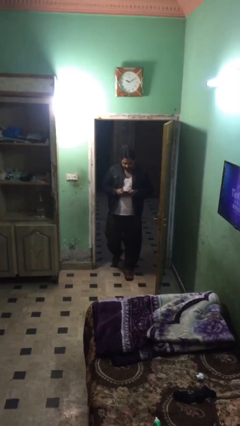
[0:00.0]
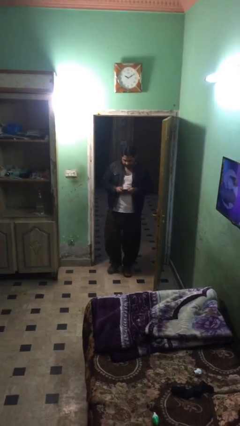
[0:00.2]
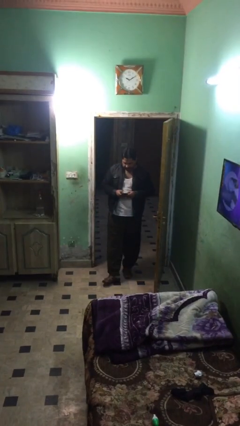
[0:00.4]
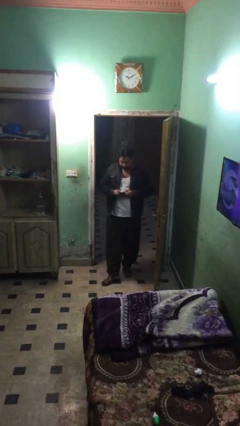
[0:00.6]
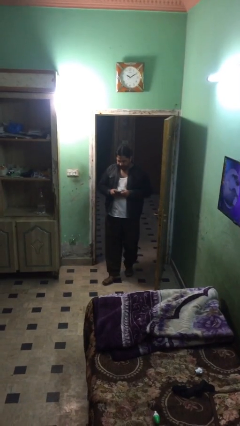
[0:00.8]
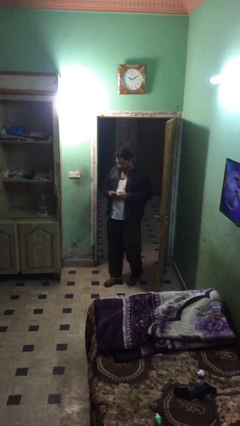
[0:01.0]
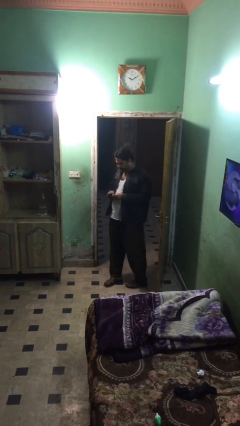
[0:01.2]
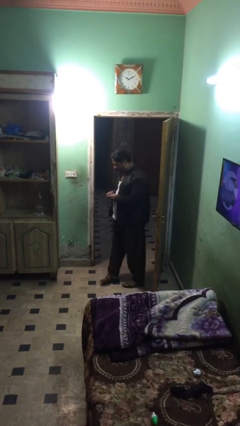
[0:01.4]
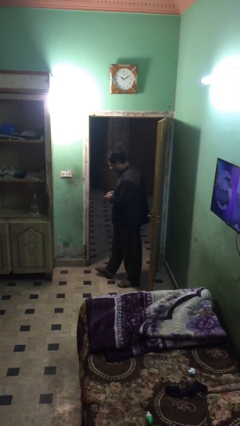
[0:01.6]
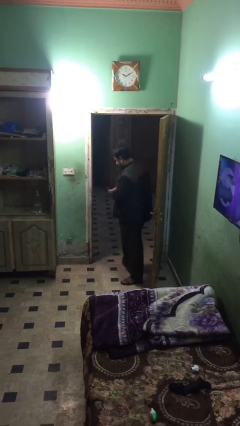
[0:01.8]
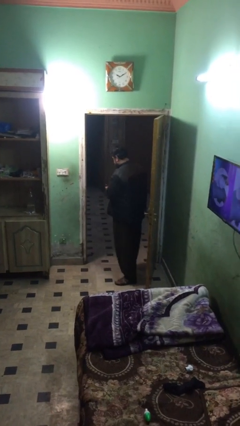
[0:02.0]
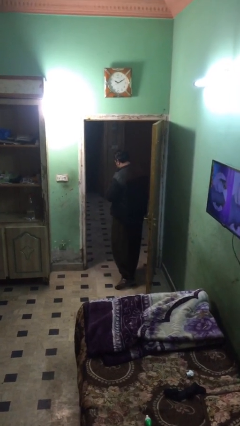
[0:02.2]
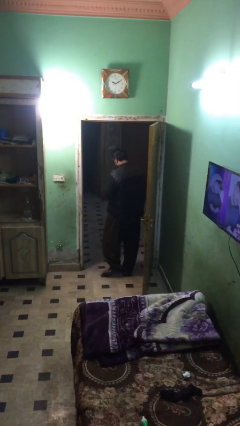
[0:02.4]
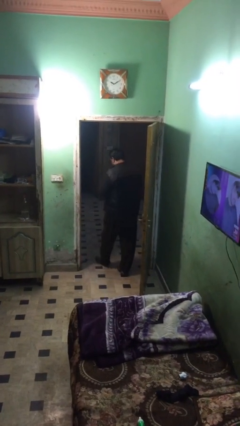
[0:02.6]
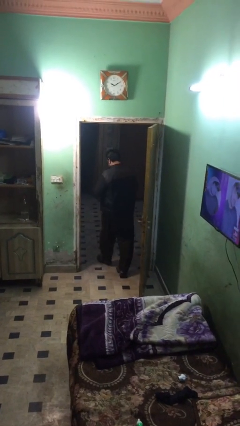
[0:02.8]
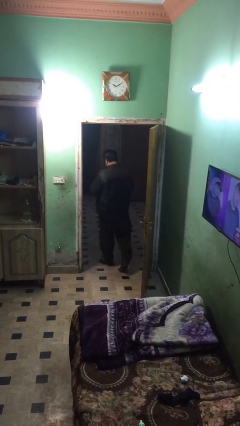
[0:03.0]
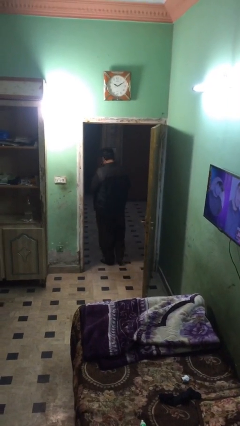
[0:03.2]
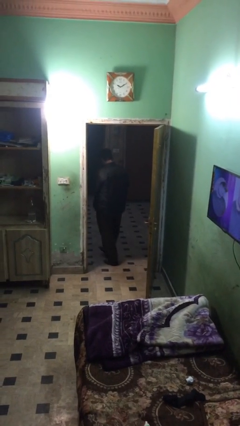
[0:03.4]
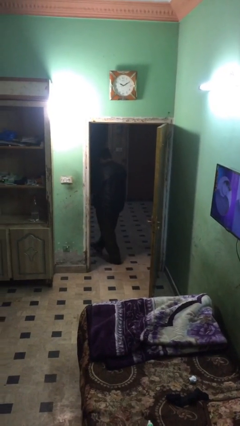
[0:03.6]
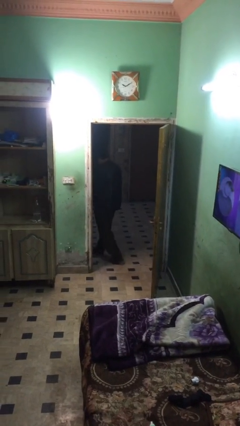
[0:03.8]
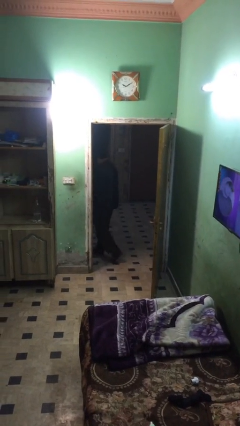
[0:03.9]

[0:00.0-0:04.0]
person exits scene through structure

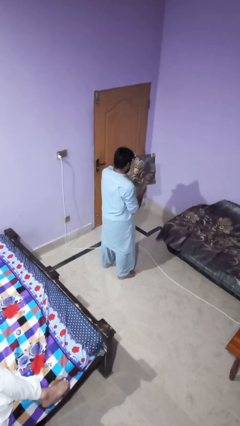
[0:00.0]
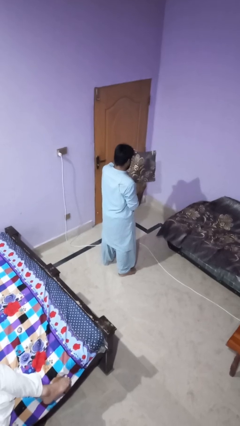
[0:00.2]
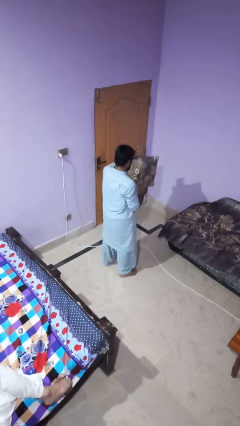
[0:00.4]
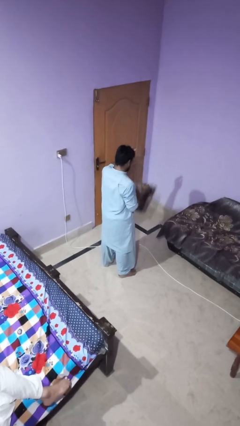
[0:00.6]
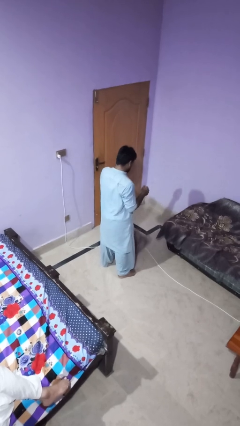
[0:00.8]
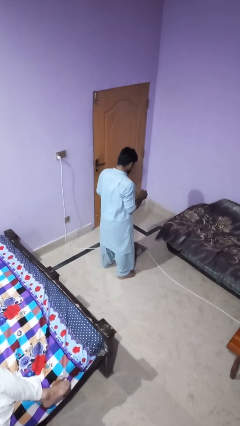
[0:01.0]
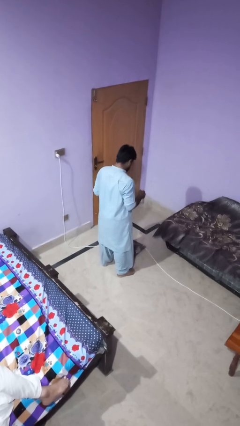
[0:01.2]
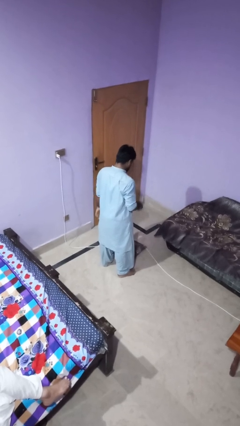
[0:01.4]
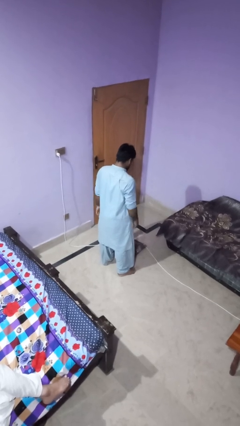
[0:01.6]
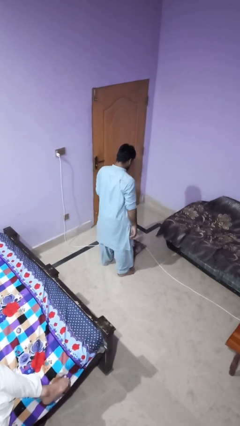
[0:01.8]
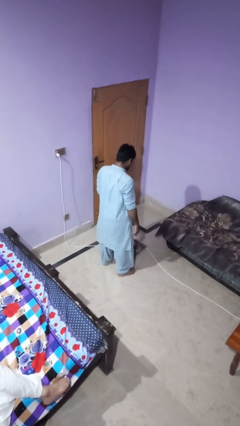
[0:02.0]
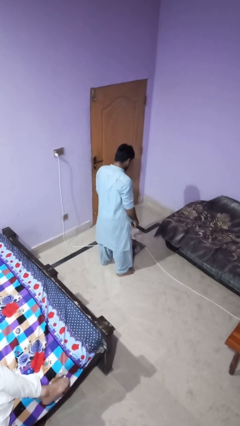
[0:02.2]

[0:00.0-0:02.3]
person drops object

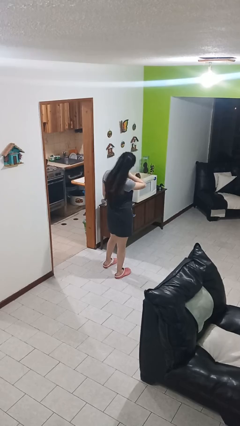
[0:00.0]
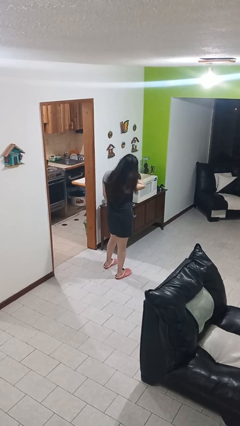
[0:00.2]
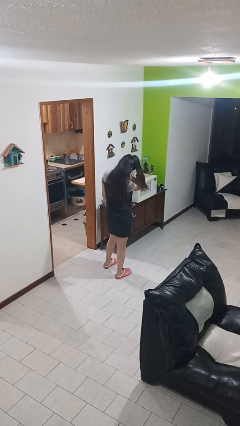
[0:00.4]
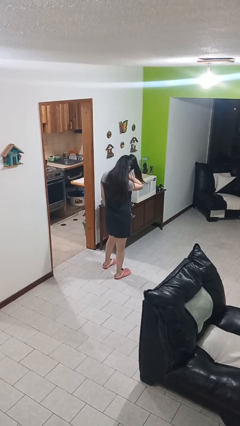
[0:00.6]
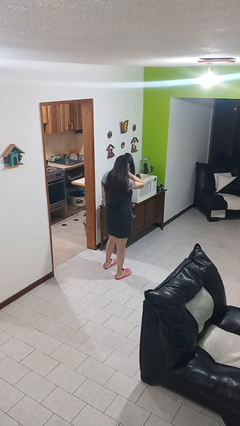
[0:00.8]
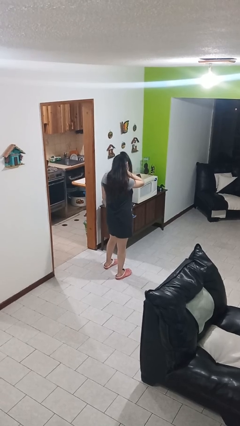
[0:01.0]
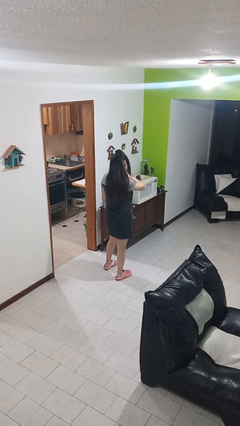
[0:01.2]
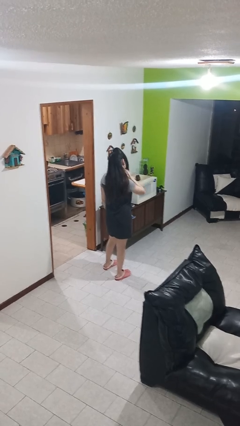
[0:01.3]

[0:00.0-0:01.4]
person rubs neck

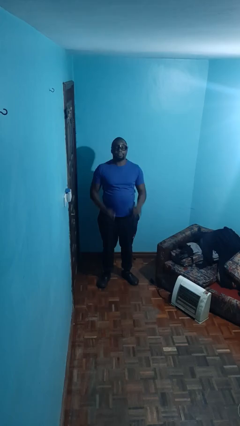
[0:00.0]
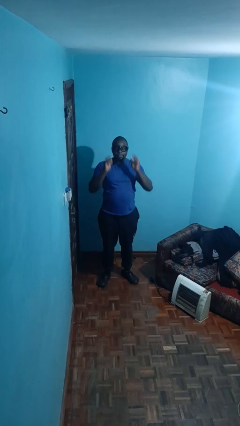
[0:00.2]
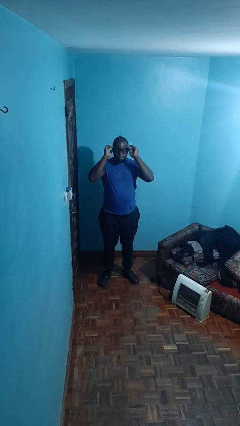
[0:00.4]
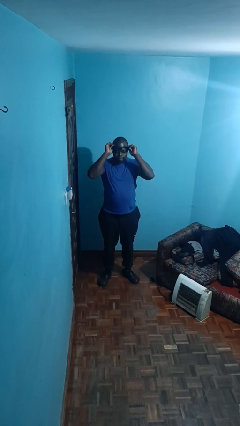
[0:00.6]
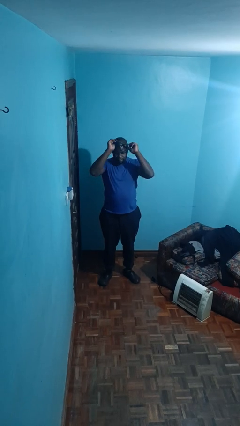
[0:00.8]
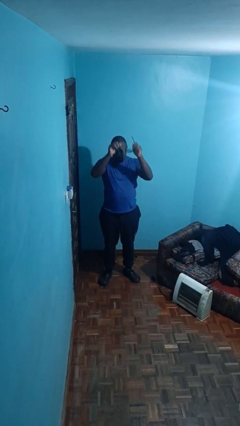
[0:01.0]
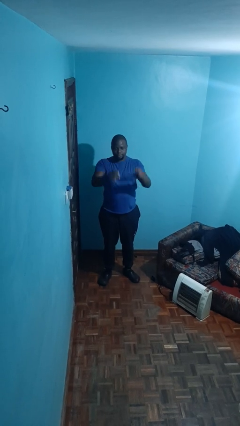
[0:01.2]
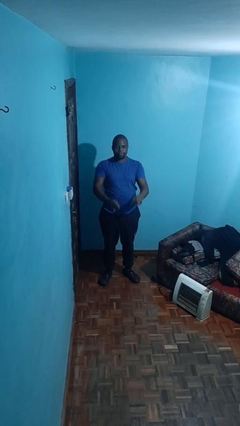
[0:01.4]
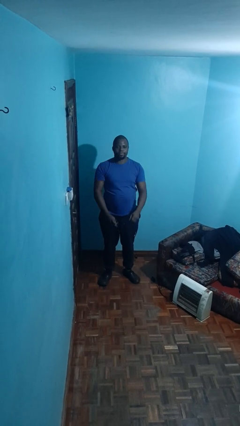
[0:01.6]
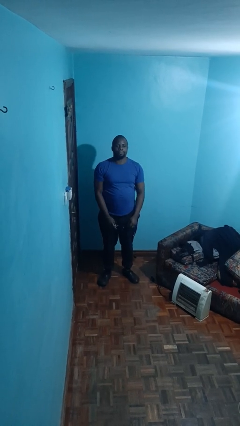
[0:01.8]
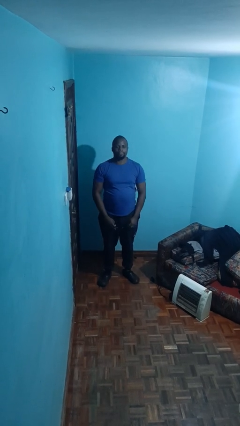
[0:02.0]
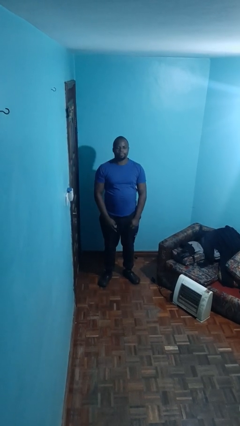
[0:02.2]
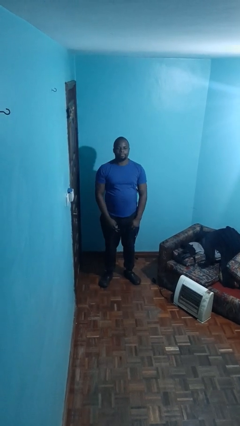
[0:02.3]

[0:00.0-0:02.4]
person takes off glasses

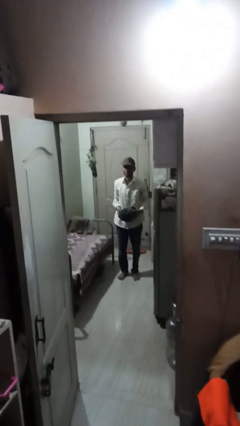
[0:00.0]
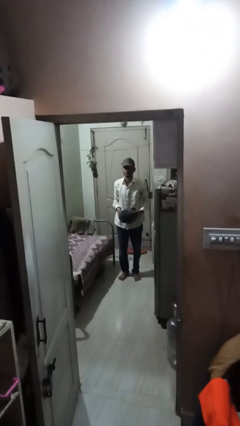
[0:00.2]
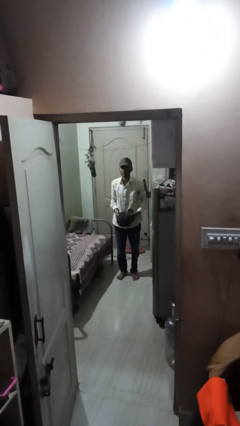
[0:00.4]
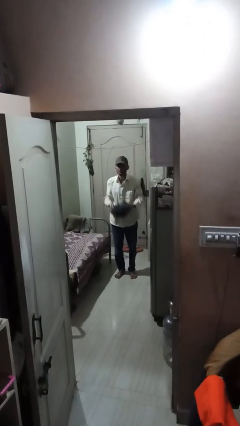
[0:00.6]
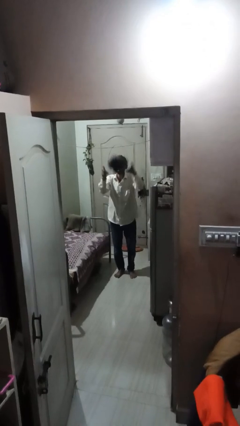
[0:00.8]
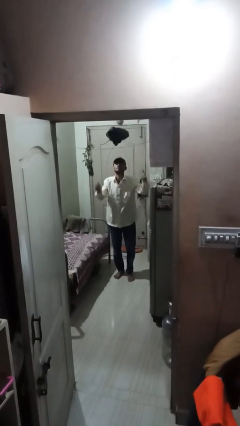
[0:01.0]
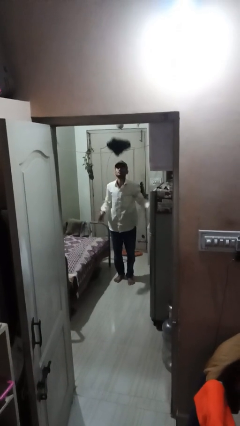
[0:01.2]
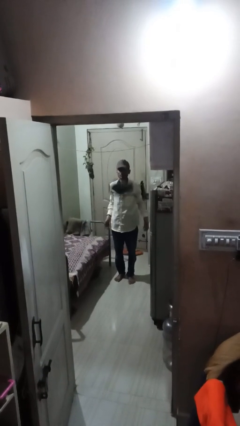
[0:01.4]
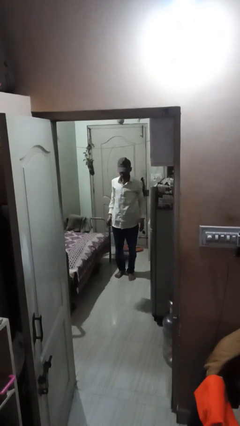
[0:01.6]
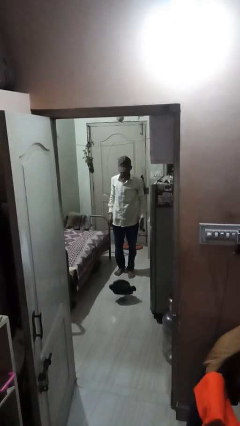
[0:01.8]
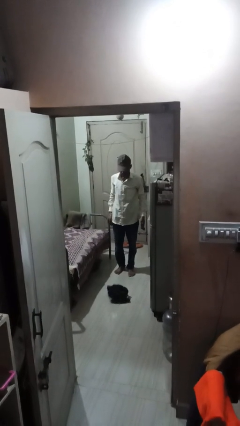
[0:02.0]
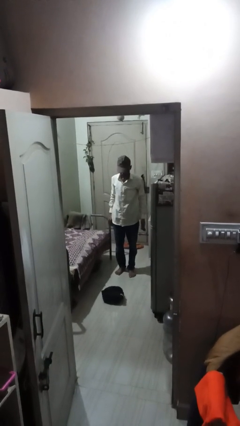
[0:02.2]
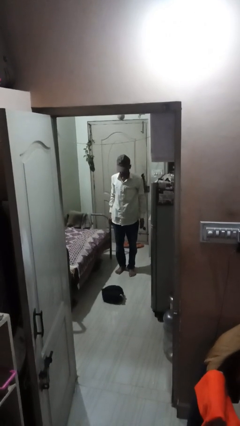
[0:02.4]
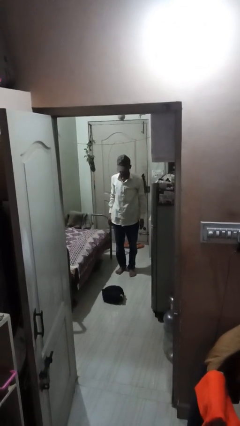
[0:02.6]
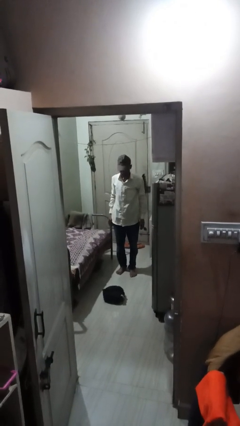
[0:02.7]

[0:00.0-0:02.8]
person throws object into air

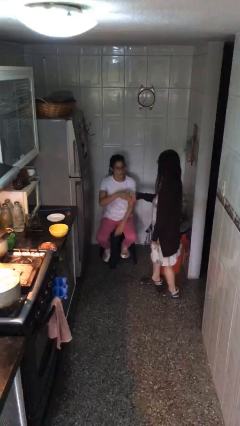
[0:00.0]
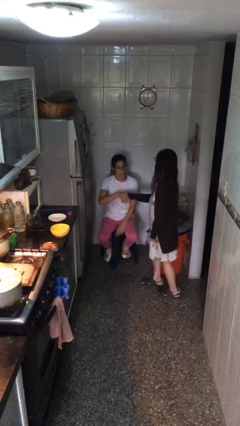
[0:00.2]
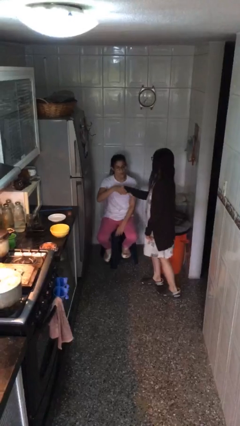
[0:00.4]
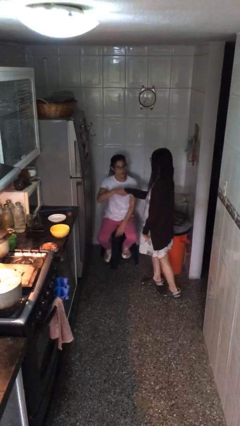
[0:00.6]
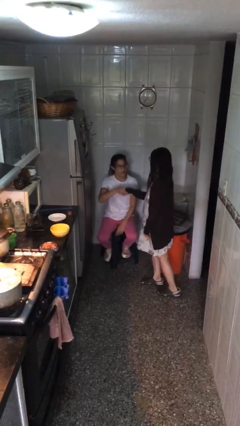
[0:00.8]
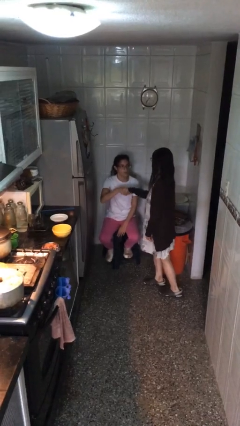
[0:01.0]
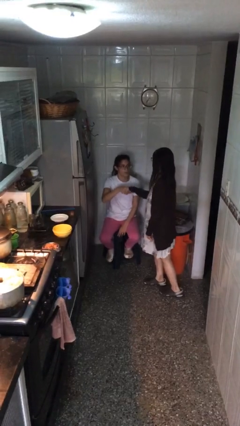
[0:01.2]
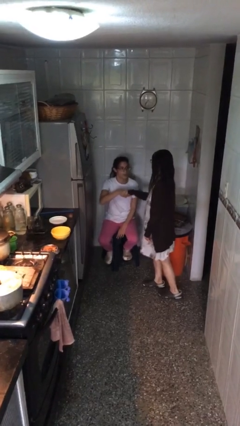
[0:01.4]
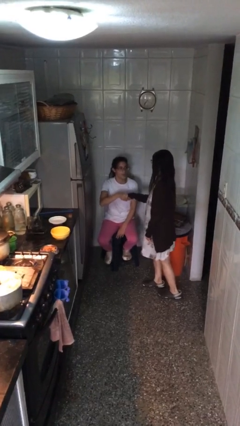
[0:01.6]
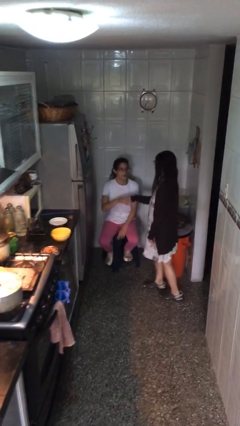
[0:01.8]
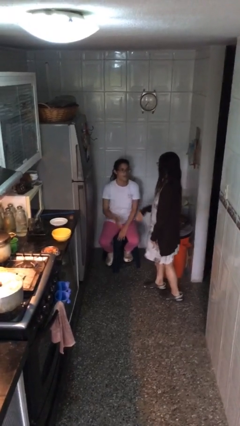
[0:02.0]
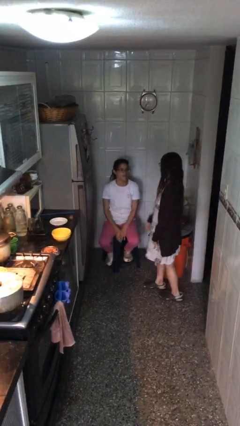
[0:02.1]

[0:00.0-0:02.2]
person shakes hand

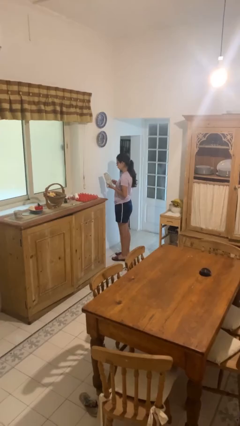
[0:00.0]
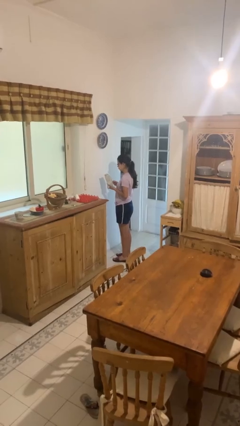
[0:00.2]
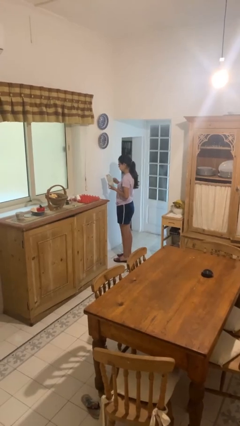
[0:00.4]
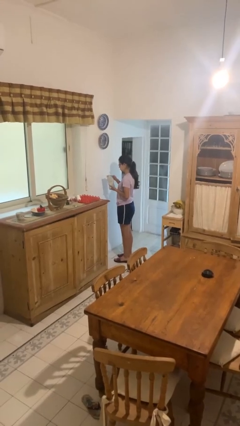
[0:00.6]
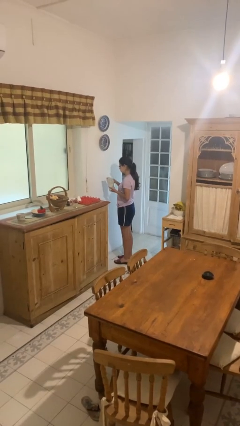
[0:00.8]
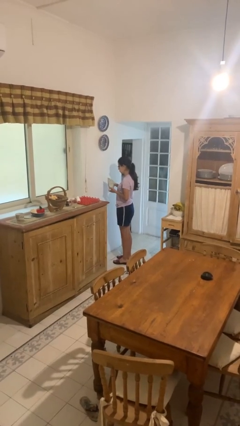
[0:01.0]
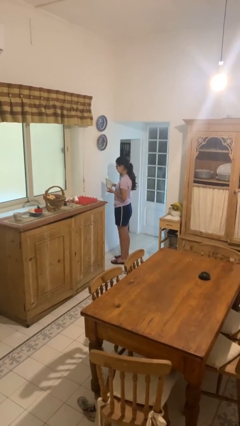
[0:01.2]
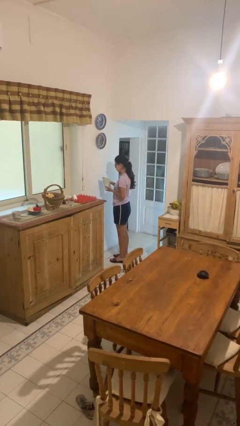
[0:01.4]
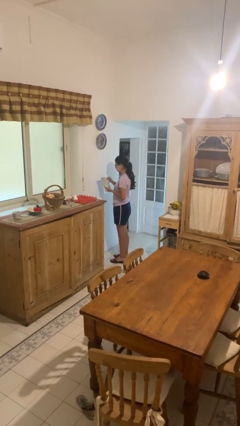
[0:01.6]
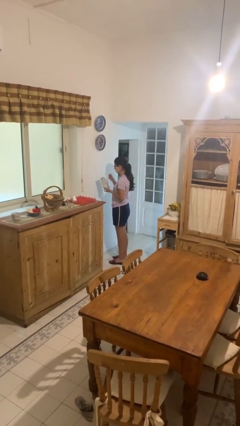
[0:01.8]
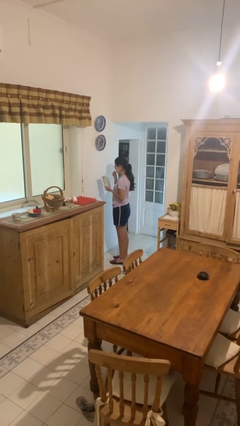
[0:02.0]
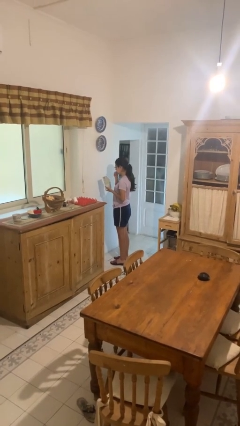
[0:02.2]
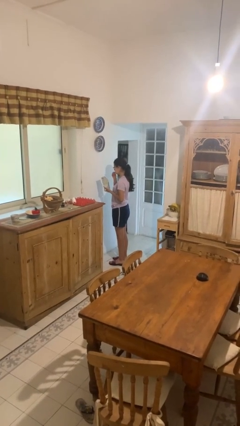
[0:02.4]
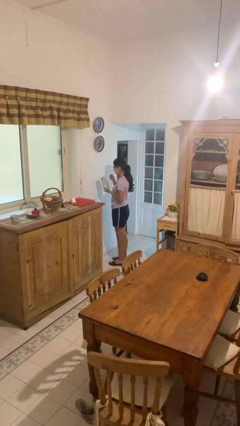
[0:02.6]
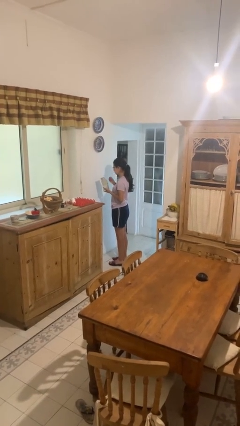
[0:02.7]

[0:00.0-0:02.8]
person eats snack from bag
